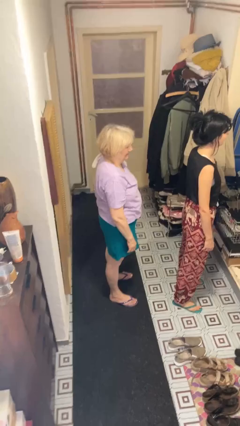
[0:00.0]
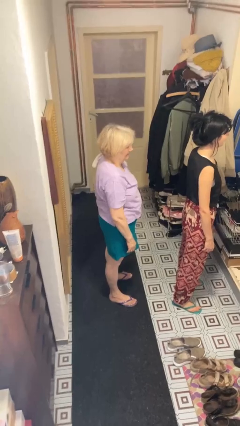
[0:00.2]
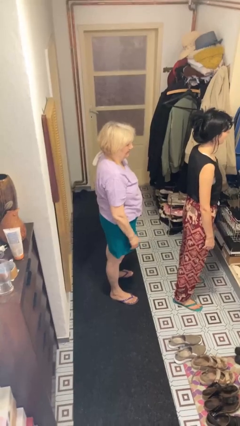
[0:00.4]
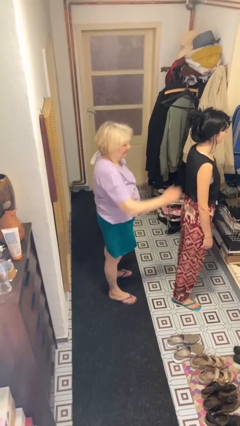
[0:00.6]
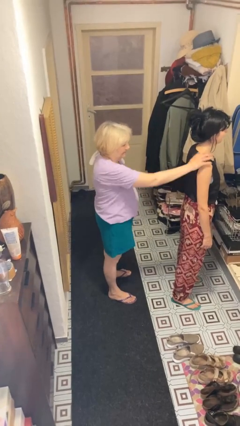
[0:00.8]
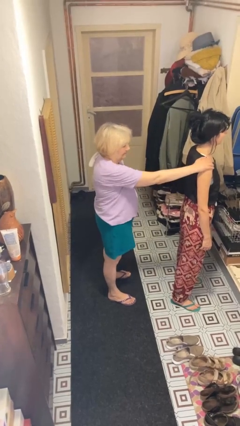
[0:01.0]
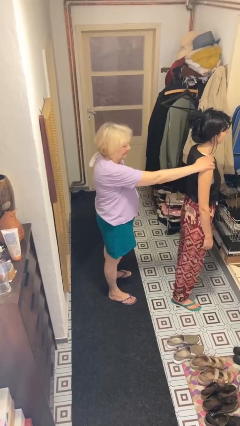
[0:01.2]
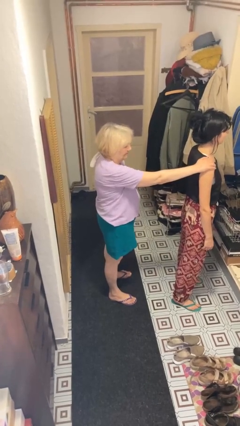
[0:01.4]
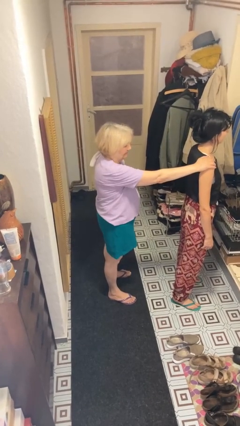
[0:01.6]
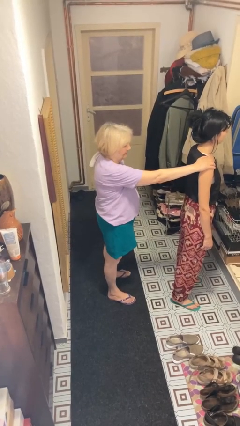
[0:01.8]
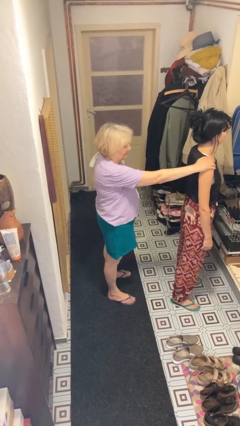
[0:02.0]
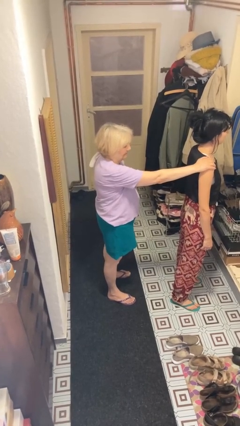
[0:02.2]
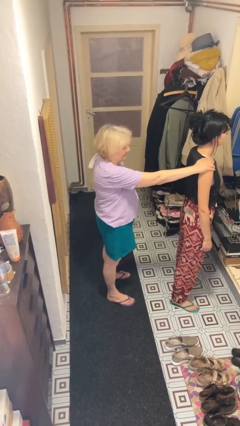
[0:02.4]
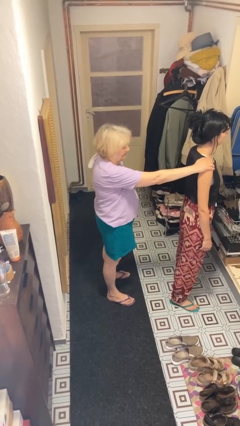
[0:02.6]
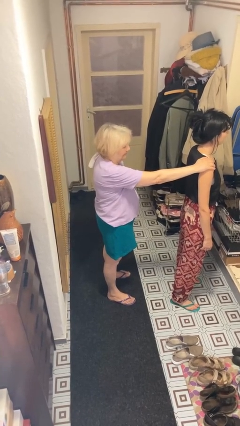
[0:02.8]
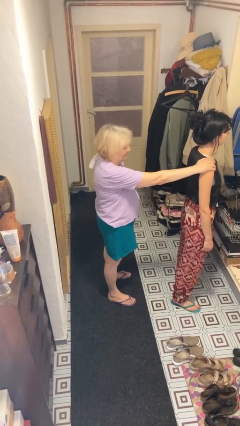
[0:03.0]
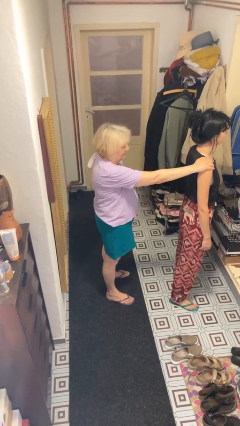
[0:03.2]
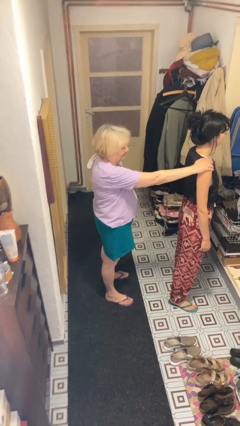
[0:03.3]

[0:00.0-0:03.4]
person grabs person by shoulder

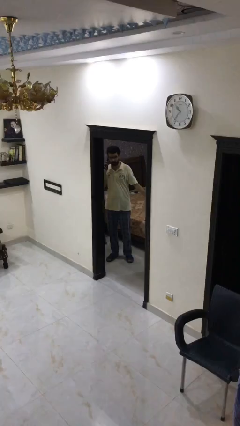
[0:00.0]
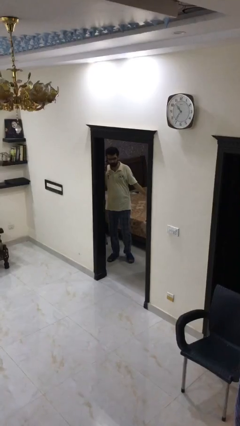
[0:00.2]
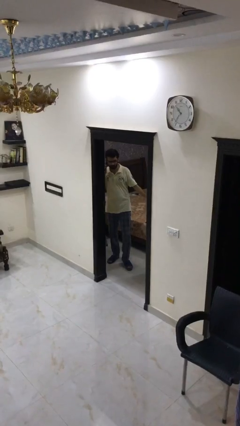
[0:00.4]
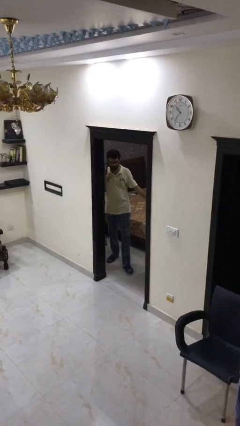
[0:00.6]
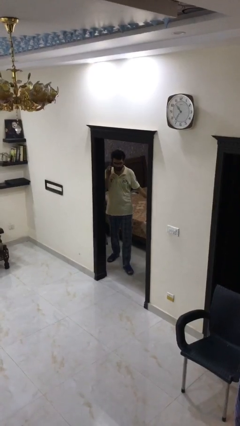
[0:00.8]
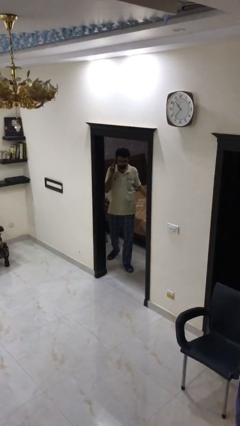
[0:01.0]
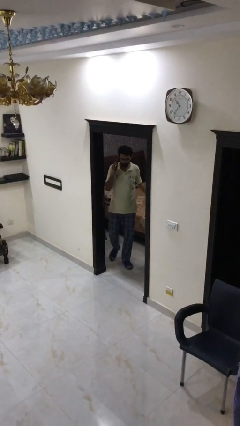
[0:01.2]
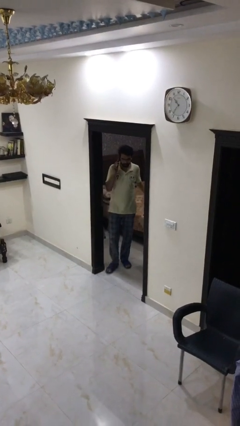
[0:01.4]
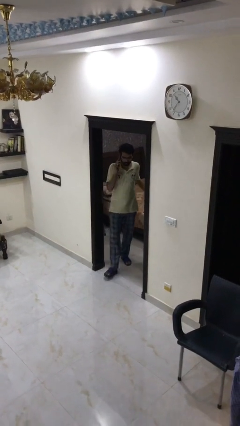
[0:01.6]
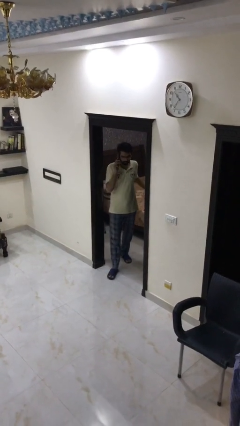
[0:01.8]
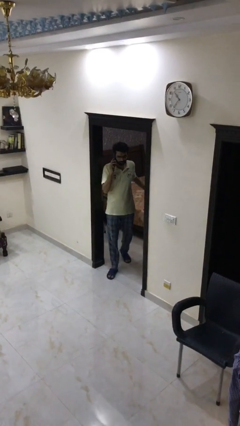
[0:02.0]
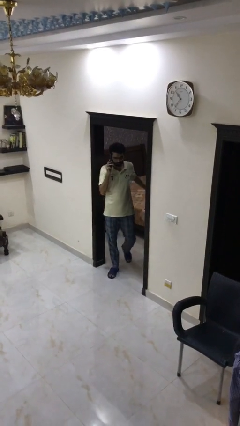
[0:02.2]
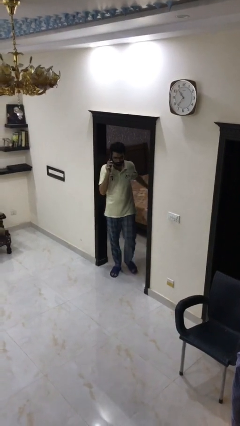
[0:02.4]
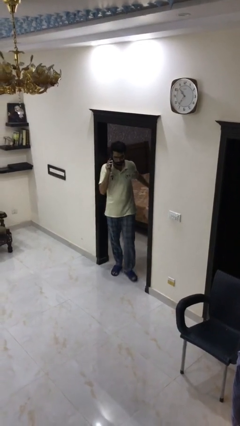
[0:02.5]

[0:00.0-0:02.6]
person enters scene through structure

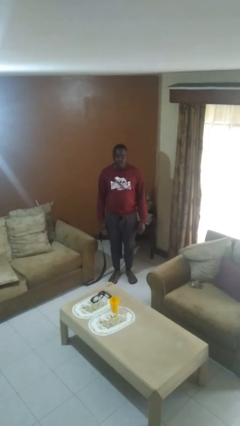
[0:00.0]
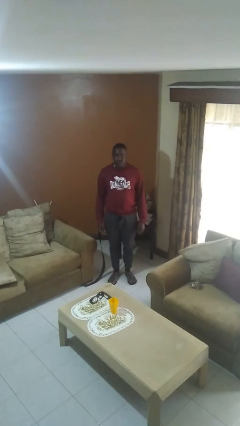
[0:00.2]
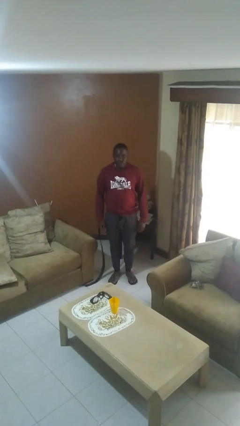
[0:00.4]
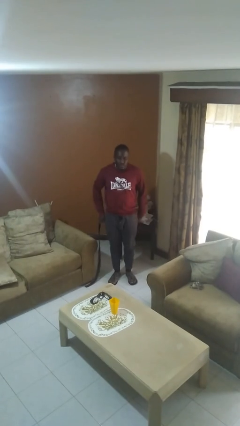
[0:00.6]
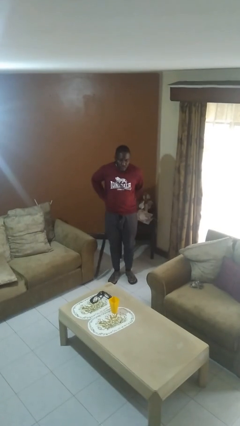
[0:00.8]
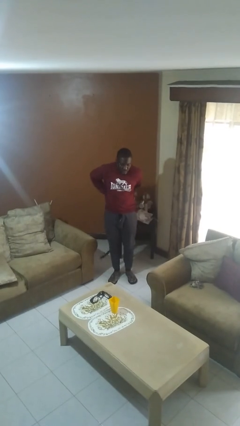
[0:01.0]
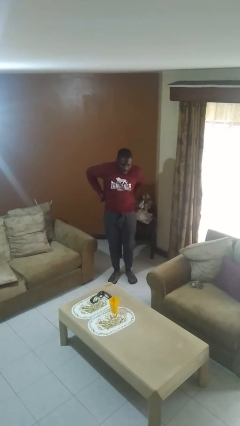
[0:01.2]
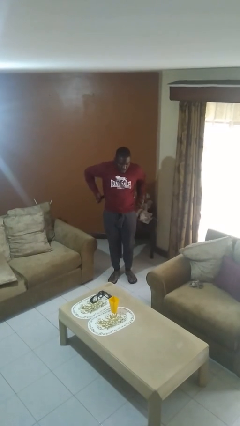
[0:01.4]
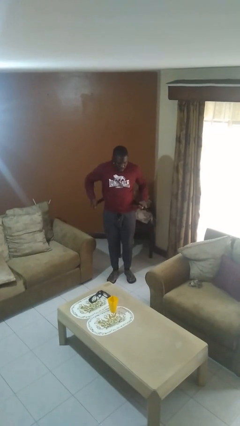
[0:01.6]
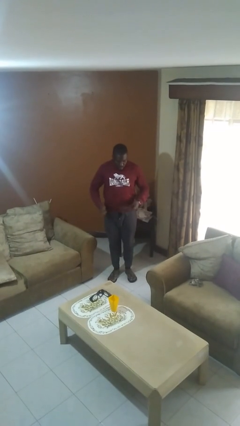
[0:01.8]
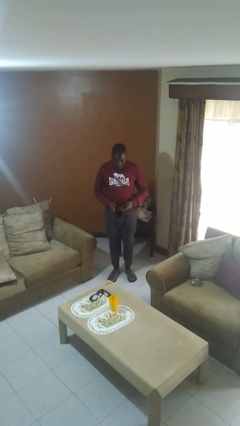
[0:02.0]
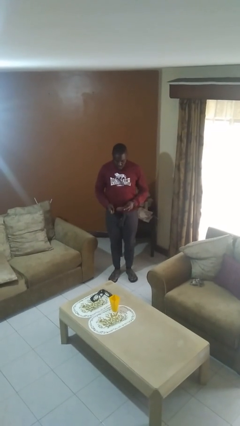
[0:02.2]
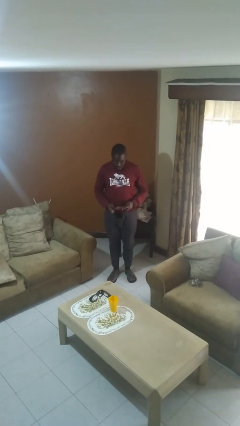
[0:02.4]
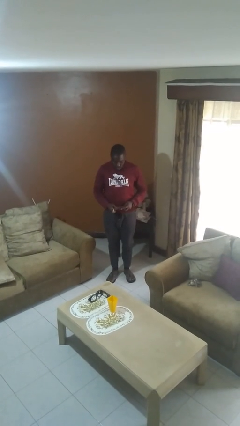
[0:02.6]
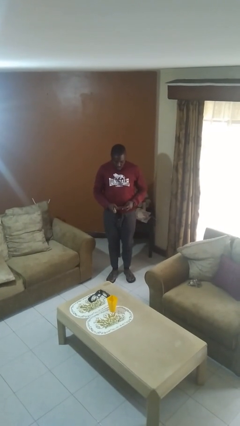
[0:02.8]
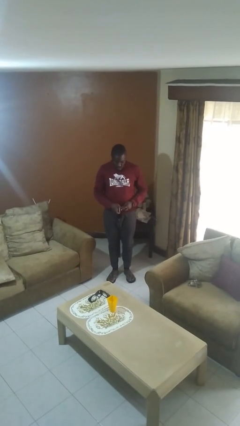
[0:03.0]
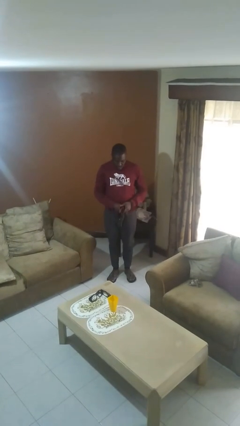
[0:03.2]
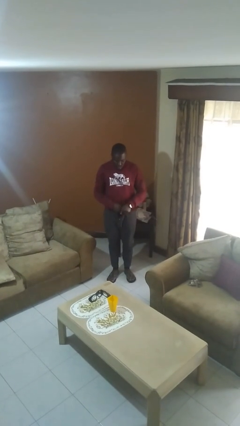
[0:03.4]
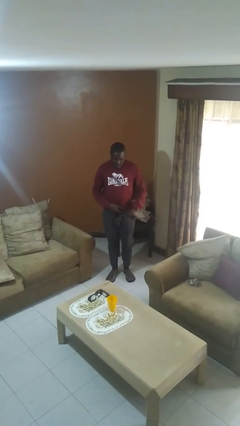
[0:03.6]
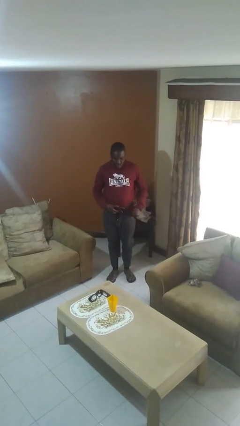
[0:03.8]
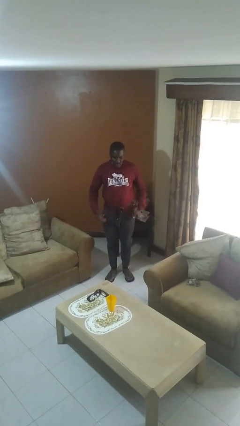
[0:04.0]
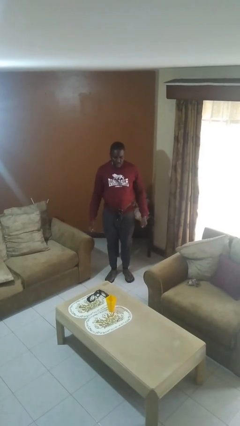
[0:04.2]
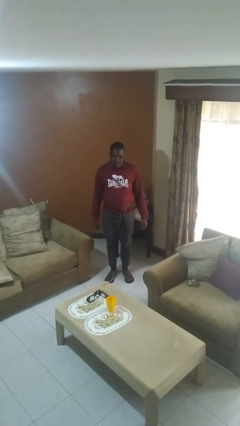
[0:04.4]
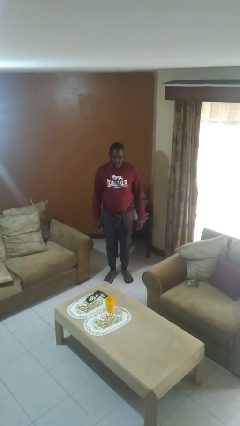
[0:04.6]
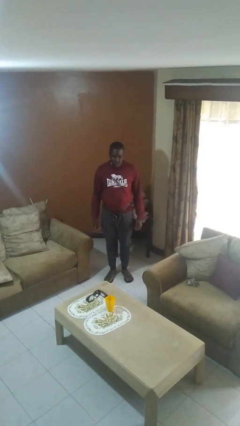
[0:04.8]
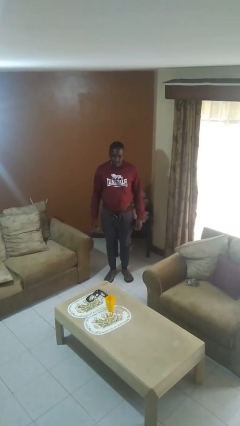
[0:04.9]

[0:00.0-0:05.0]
person puts on belt

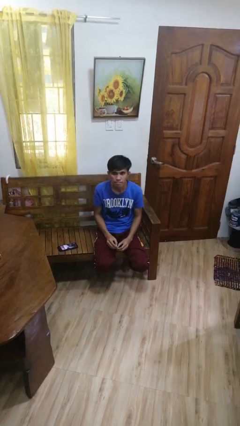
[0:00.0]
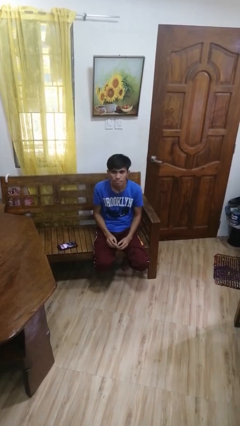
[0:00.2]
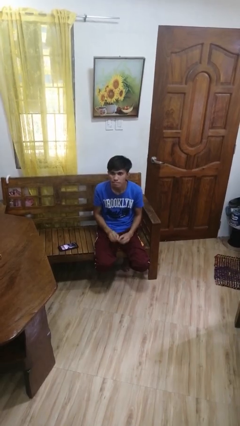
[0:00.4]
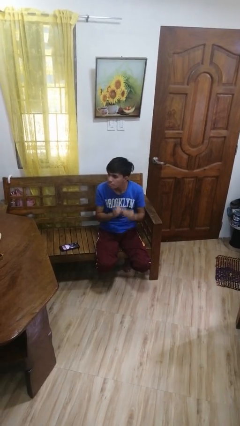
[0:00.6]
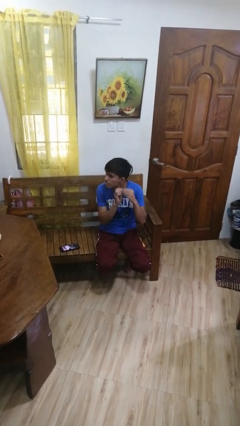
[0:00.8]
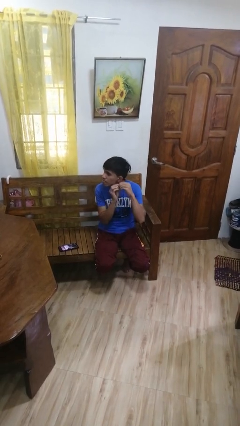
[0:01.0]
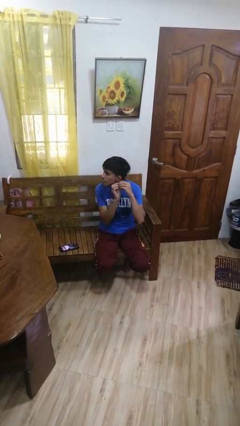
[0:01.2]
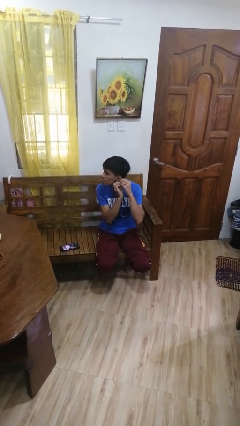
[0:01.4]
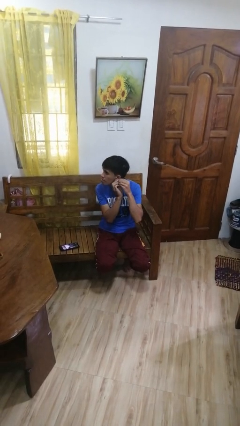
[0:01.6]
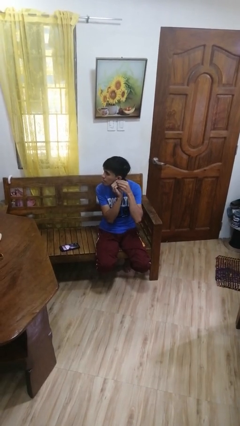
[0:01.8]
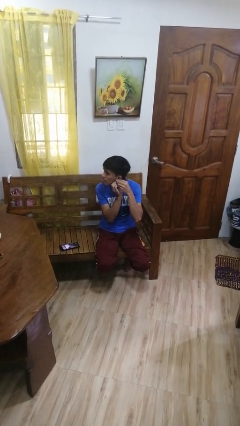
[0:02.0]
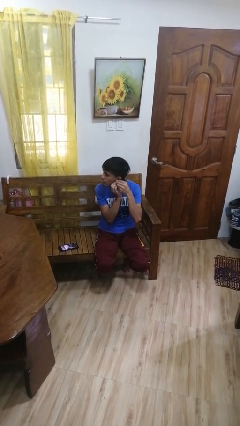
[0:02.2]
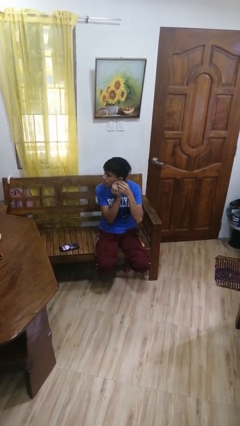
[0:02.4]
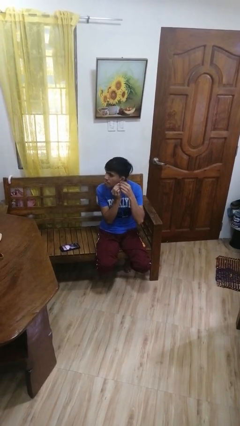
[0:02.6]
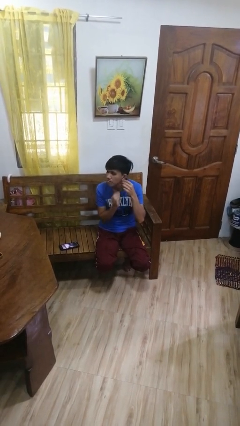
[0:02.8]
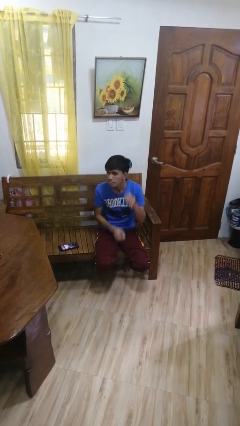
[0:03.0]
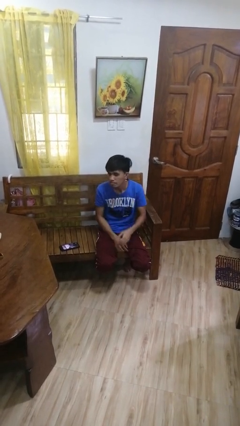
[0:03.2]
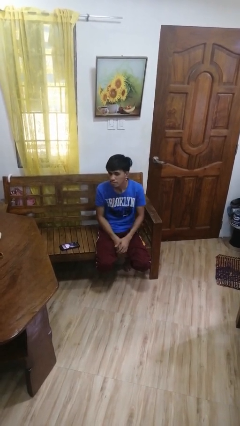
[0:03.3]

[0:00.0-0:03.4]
person puts on earrings

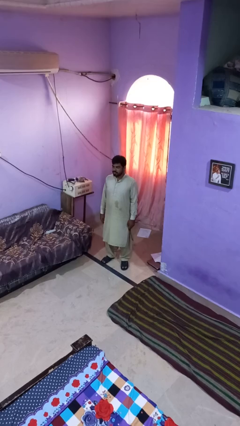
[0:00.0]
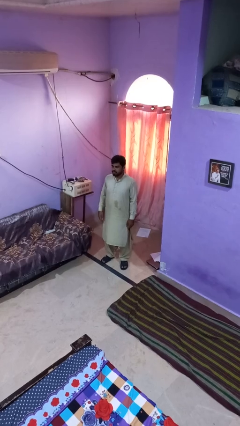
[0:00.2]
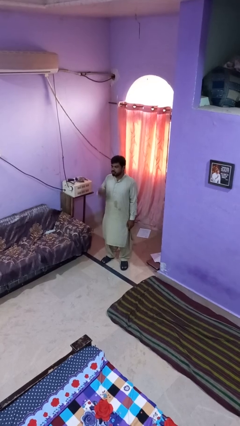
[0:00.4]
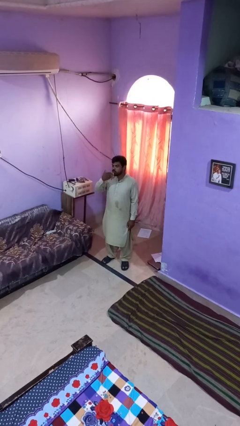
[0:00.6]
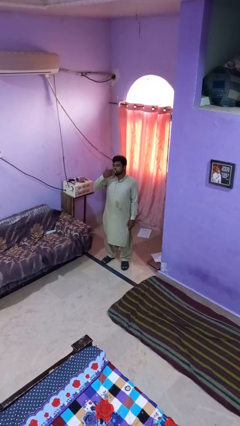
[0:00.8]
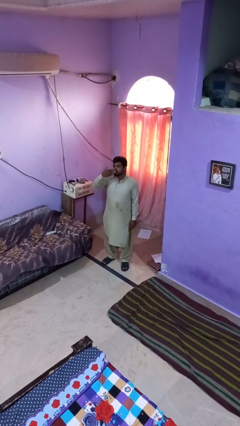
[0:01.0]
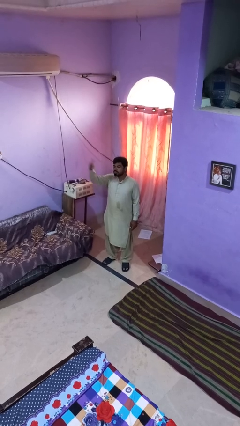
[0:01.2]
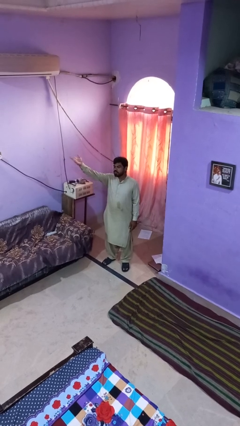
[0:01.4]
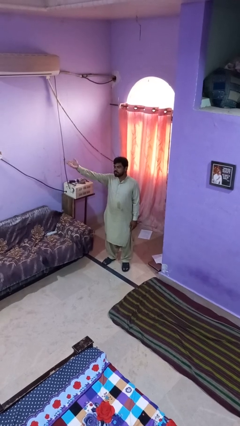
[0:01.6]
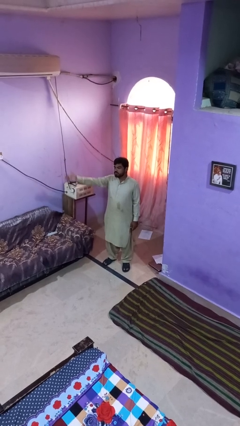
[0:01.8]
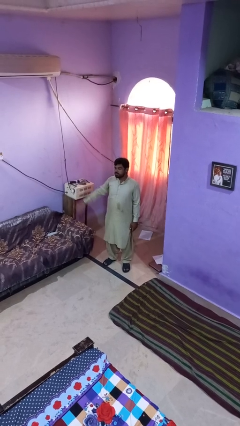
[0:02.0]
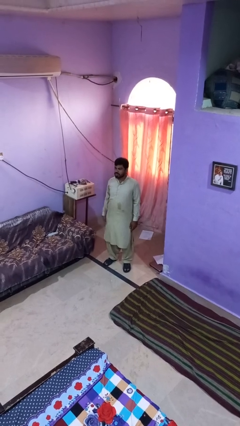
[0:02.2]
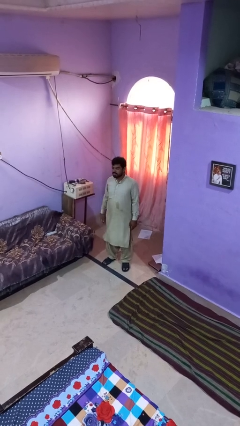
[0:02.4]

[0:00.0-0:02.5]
person gestures blow kiss

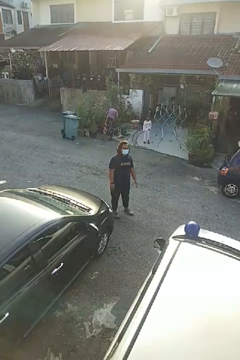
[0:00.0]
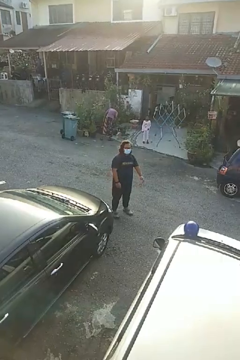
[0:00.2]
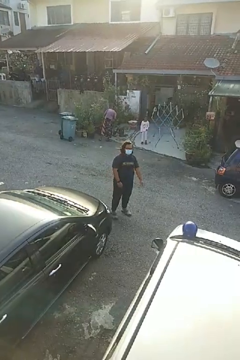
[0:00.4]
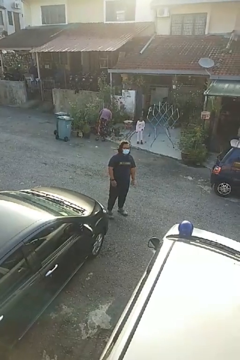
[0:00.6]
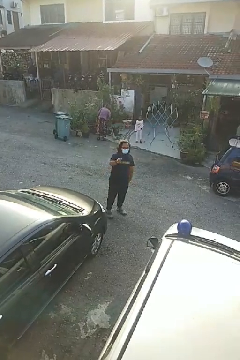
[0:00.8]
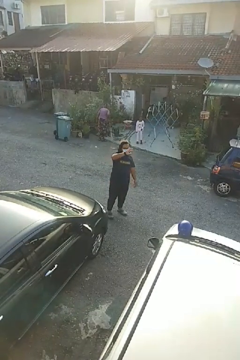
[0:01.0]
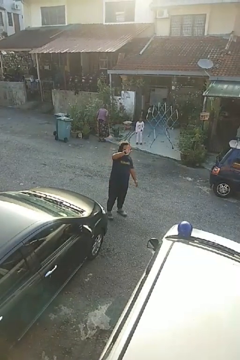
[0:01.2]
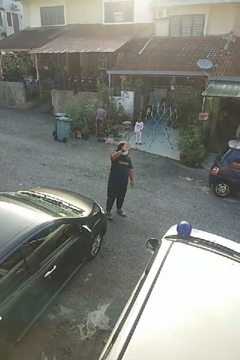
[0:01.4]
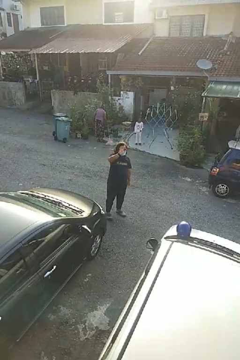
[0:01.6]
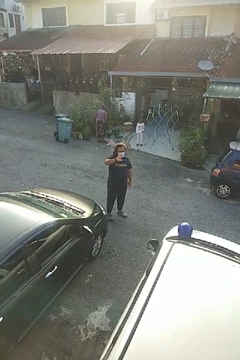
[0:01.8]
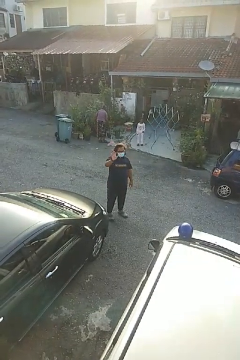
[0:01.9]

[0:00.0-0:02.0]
person waves at person
